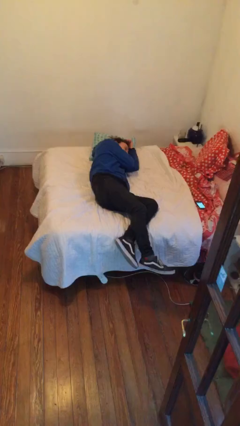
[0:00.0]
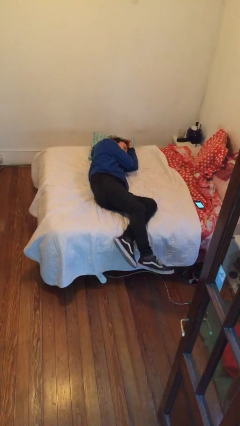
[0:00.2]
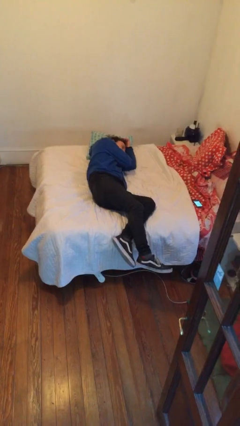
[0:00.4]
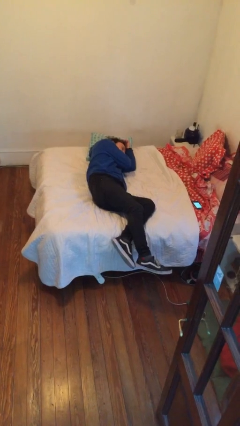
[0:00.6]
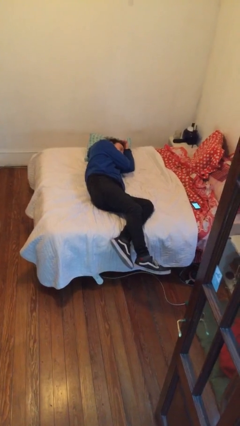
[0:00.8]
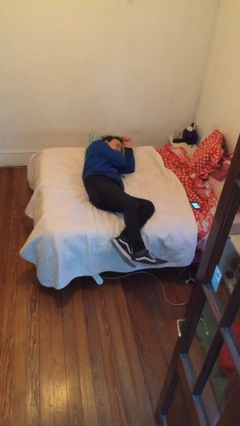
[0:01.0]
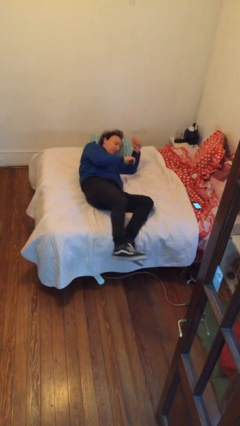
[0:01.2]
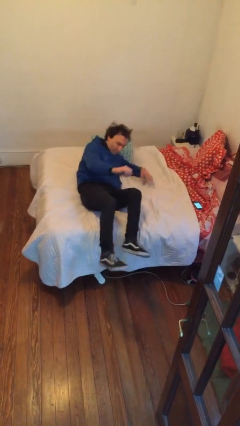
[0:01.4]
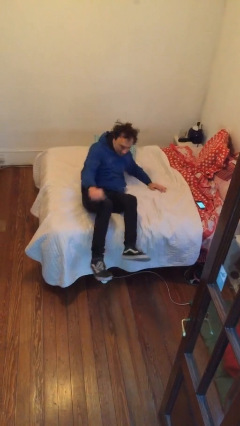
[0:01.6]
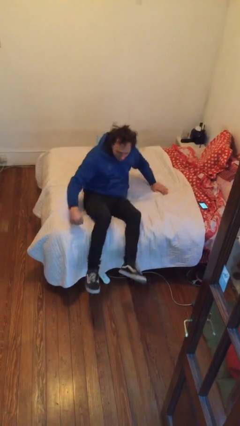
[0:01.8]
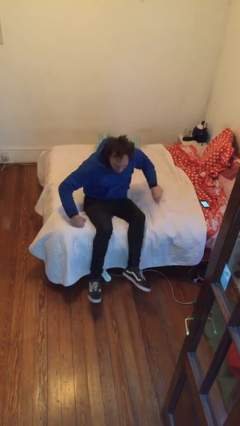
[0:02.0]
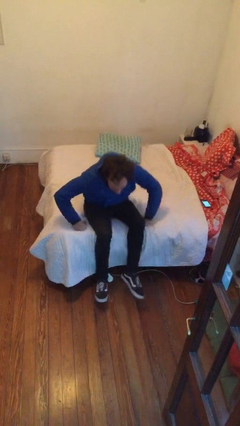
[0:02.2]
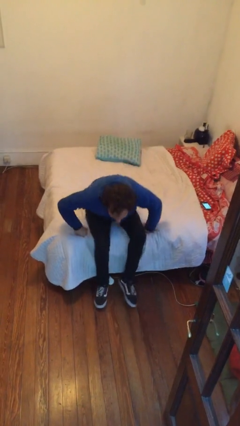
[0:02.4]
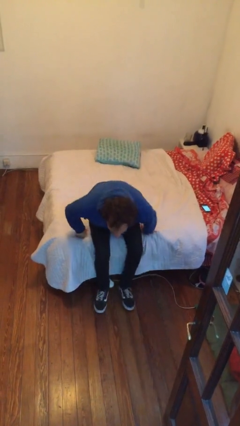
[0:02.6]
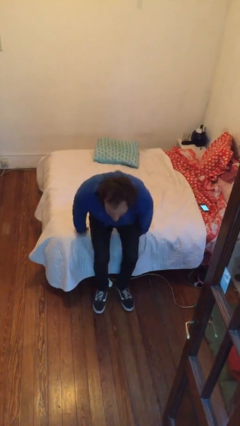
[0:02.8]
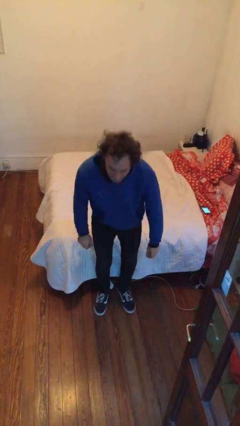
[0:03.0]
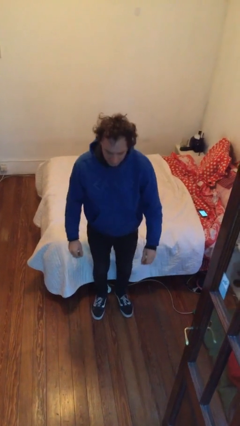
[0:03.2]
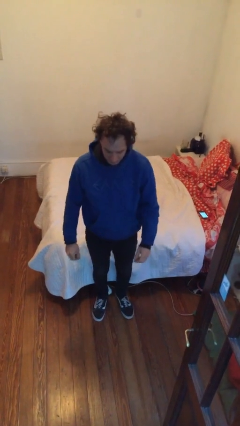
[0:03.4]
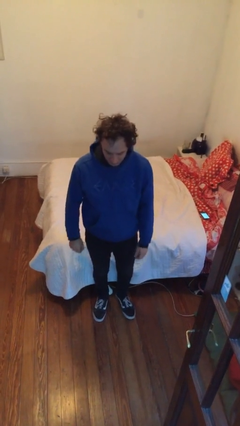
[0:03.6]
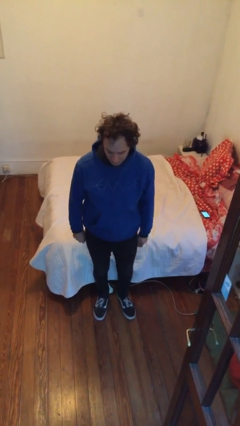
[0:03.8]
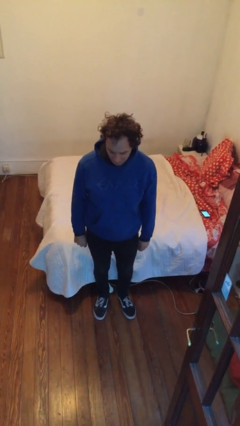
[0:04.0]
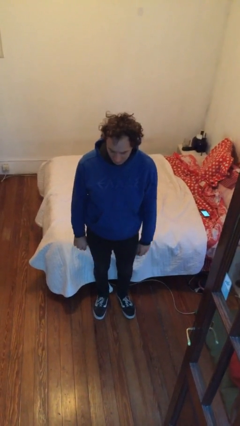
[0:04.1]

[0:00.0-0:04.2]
person stands up

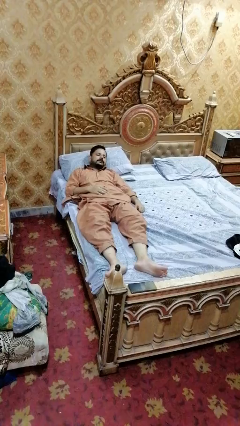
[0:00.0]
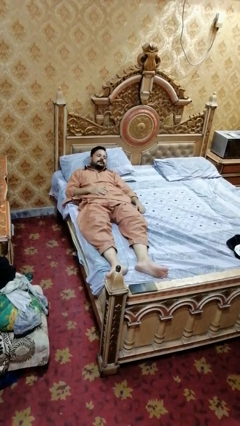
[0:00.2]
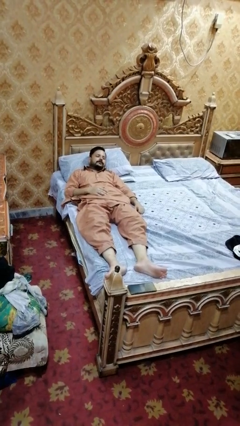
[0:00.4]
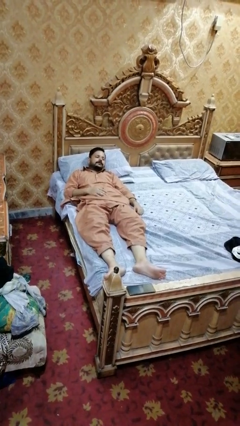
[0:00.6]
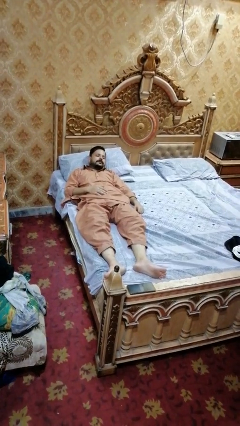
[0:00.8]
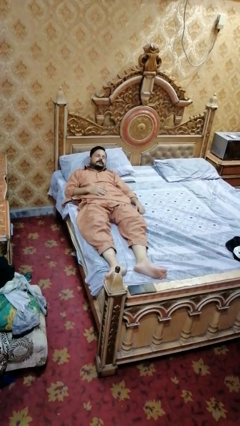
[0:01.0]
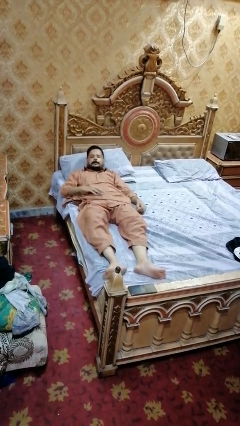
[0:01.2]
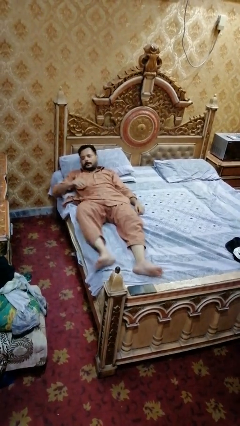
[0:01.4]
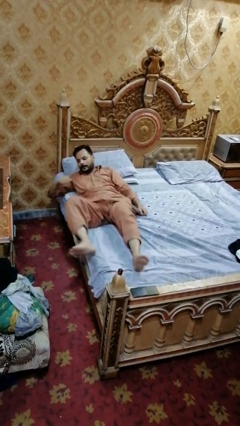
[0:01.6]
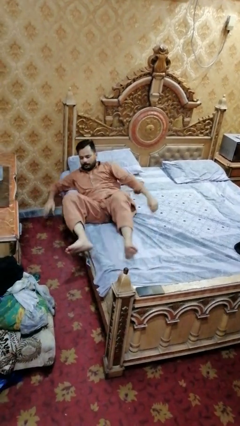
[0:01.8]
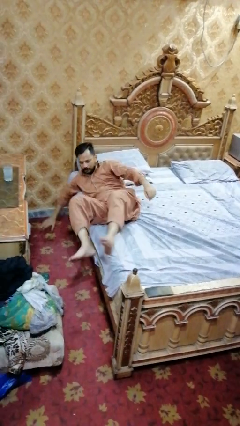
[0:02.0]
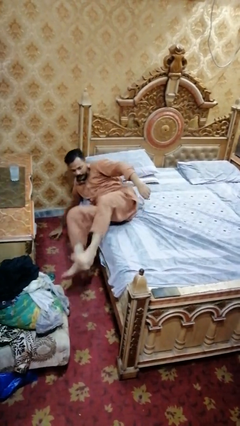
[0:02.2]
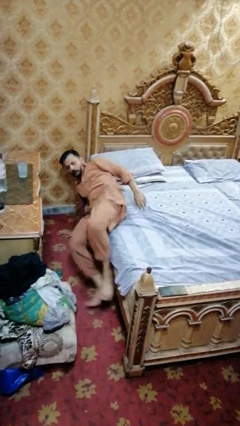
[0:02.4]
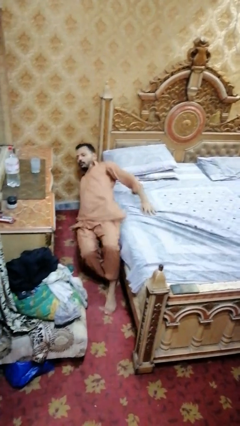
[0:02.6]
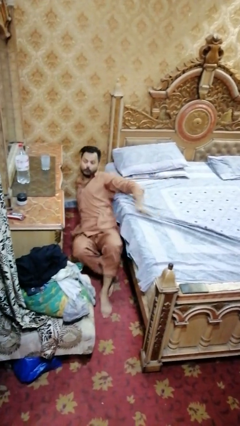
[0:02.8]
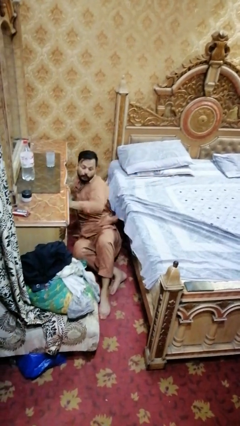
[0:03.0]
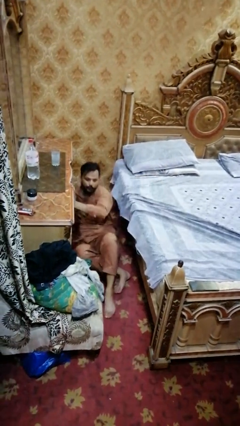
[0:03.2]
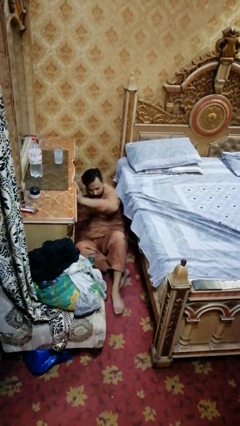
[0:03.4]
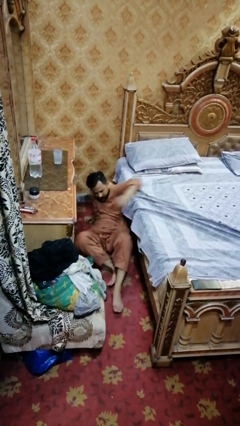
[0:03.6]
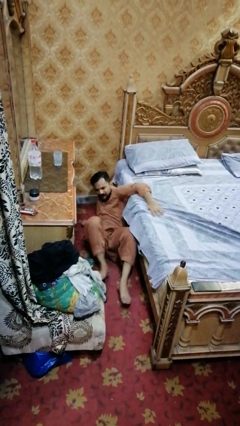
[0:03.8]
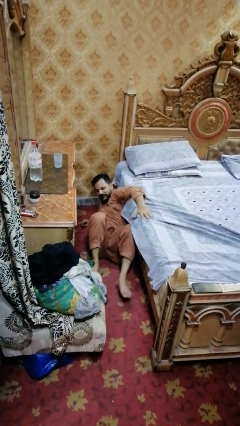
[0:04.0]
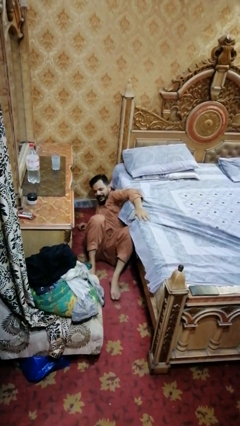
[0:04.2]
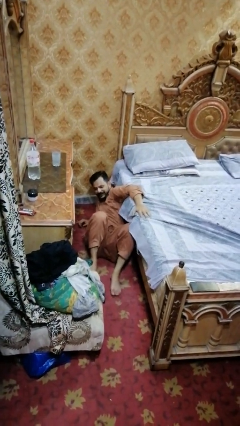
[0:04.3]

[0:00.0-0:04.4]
person falls from bed

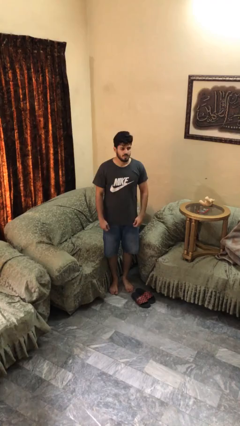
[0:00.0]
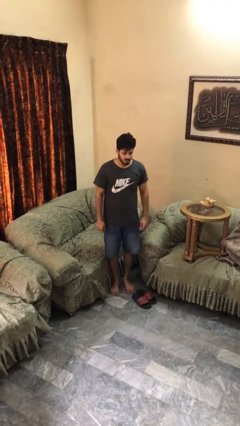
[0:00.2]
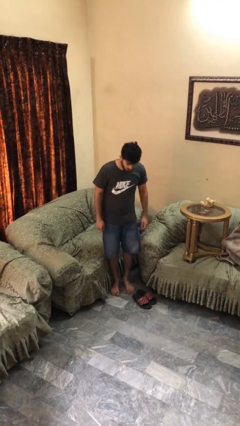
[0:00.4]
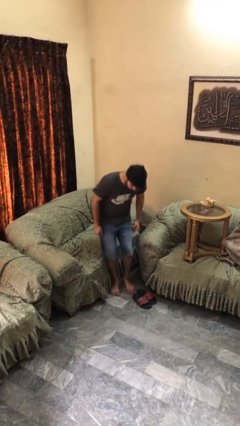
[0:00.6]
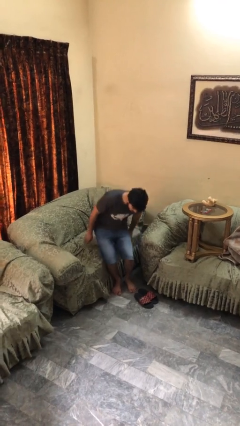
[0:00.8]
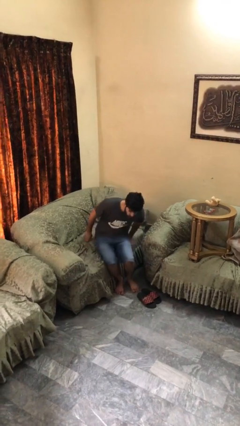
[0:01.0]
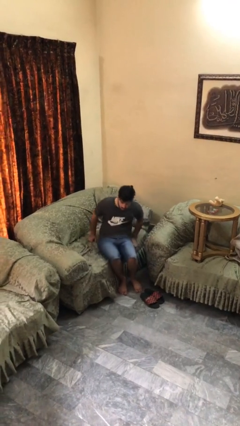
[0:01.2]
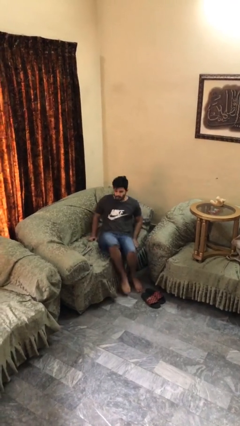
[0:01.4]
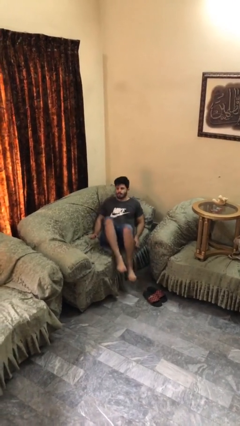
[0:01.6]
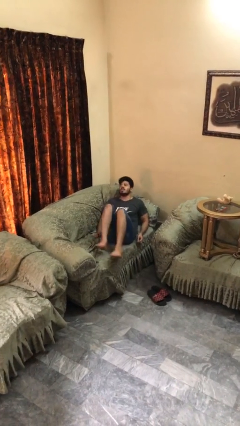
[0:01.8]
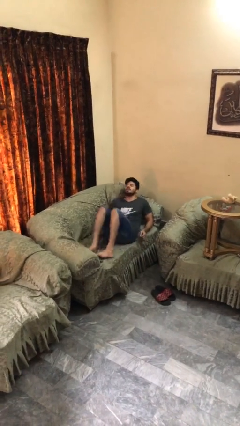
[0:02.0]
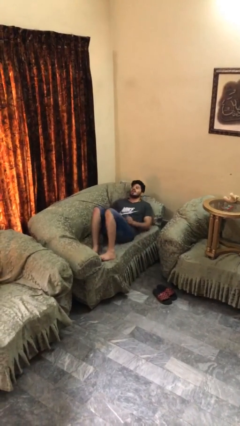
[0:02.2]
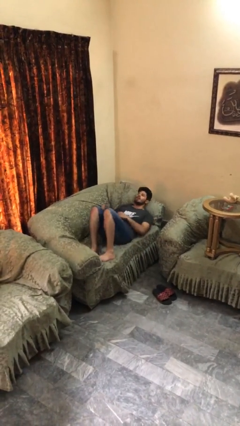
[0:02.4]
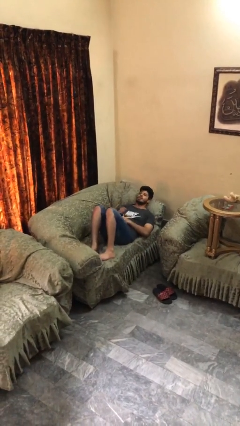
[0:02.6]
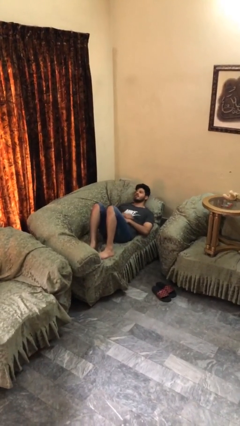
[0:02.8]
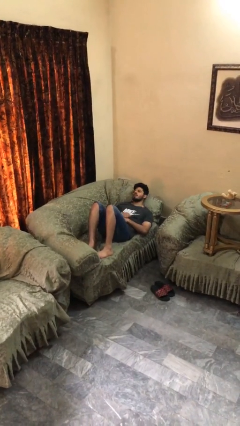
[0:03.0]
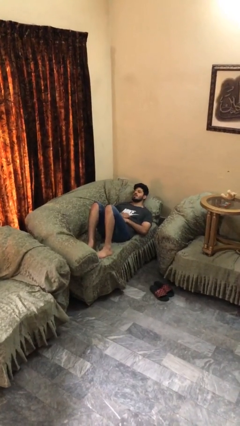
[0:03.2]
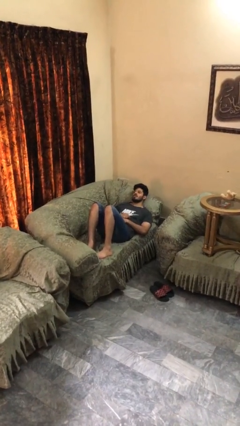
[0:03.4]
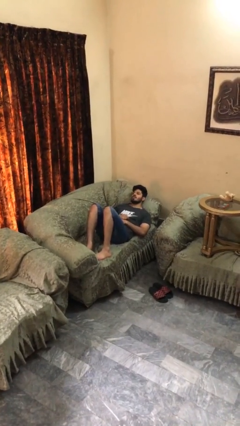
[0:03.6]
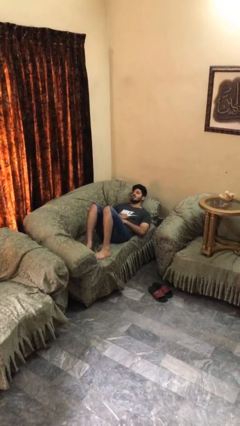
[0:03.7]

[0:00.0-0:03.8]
person lies down on couch

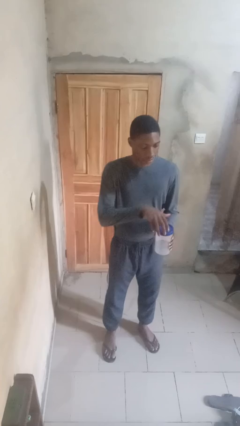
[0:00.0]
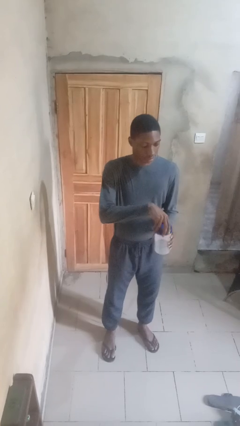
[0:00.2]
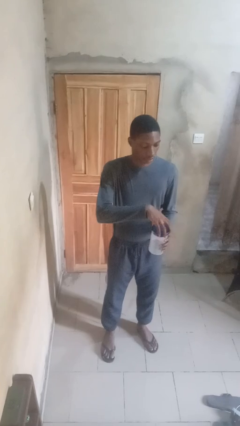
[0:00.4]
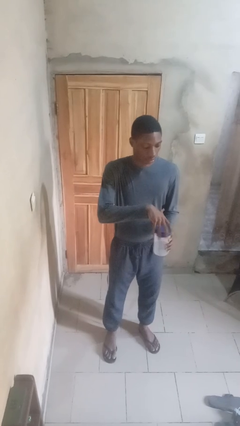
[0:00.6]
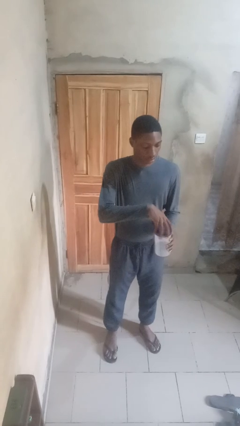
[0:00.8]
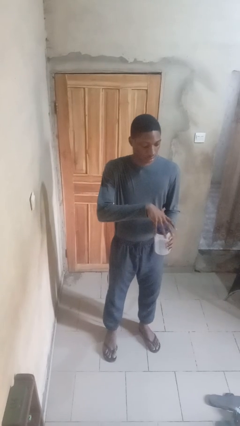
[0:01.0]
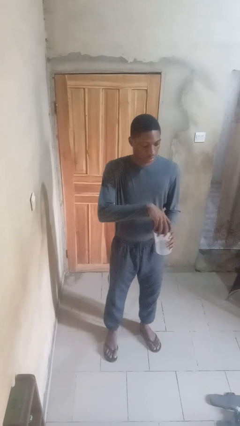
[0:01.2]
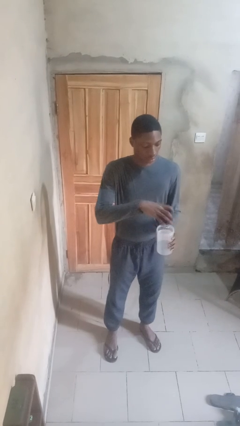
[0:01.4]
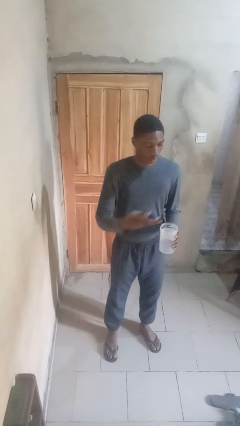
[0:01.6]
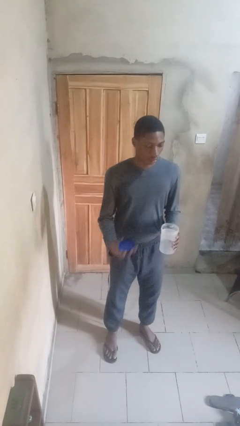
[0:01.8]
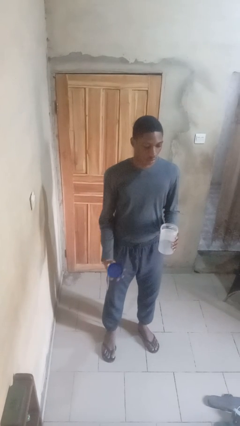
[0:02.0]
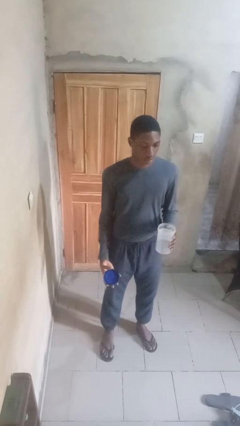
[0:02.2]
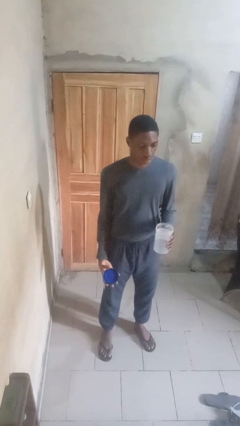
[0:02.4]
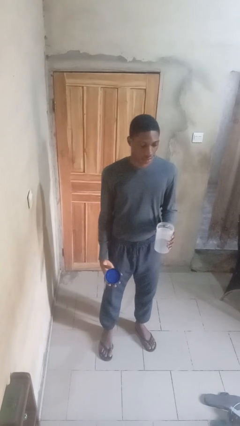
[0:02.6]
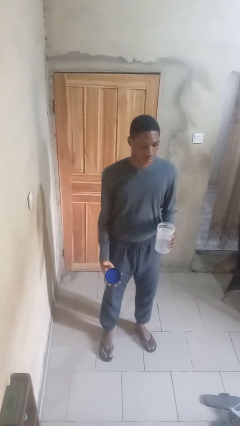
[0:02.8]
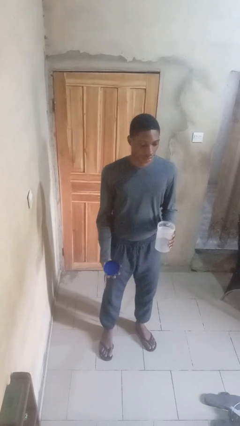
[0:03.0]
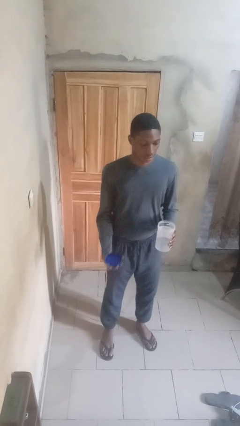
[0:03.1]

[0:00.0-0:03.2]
person opens jar

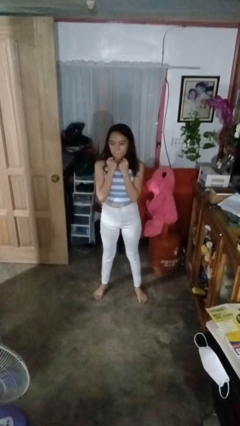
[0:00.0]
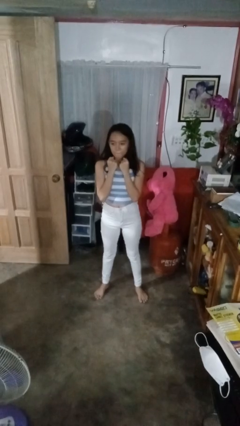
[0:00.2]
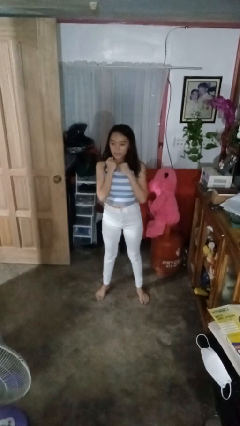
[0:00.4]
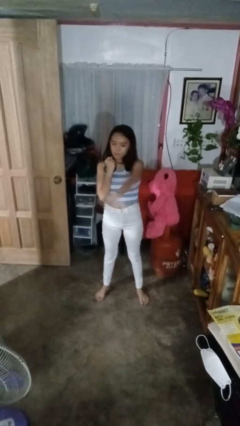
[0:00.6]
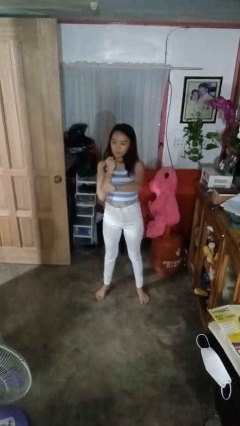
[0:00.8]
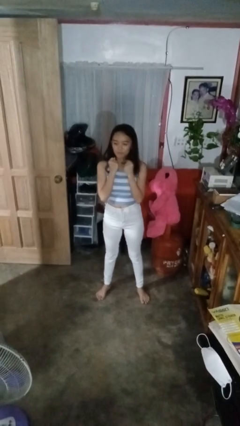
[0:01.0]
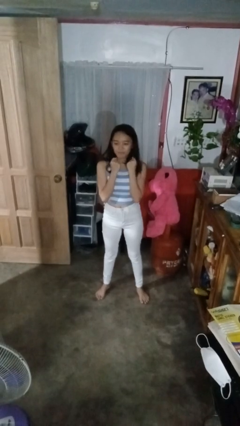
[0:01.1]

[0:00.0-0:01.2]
person punches

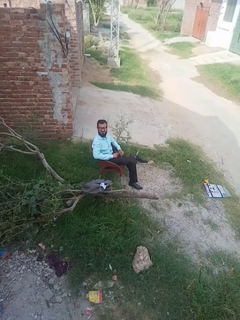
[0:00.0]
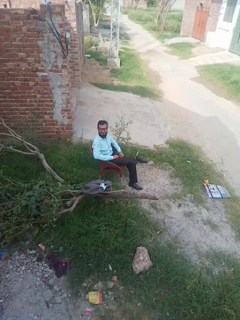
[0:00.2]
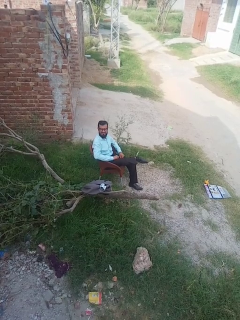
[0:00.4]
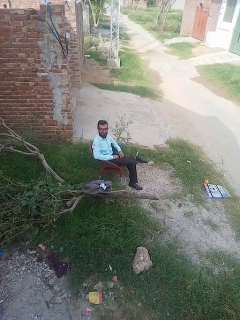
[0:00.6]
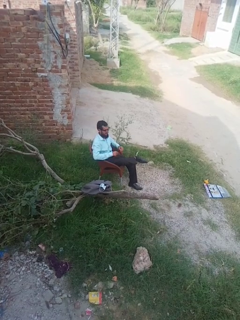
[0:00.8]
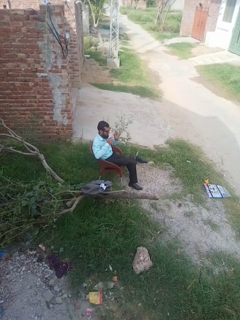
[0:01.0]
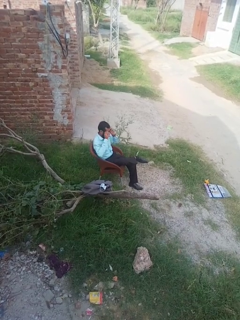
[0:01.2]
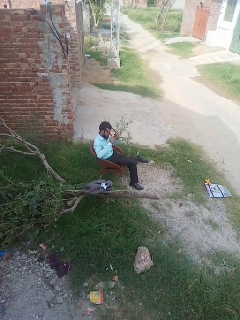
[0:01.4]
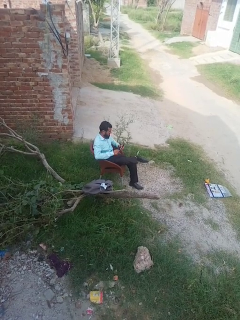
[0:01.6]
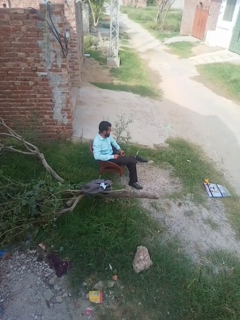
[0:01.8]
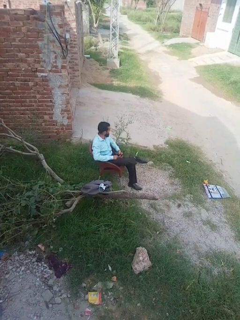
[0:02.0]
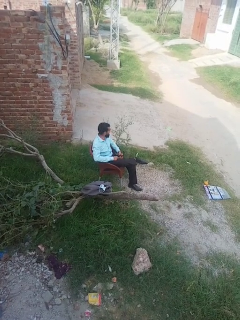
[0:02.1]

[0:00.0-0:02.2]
person takes off glasses
